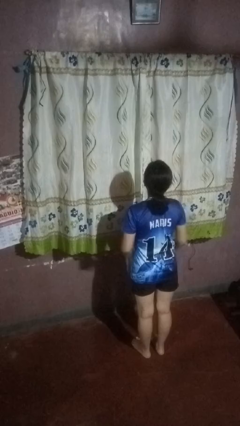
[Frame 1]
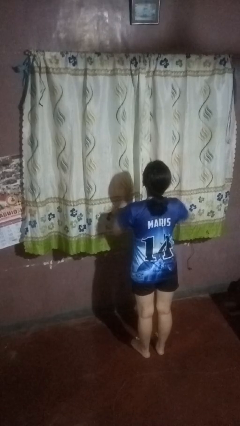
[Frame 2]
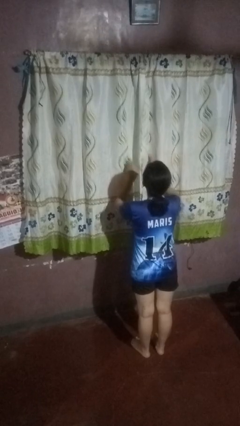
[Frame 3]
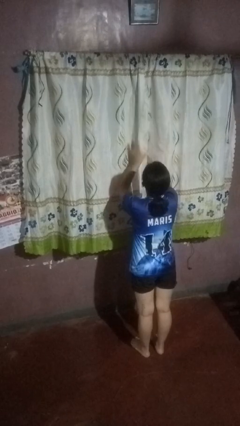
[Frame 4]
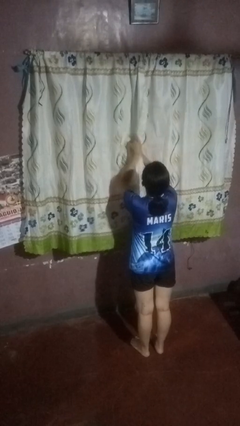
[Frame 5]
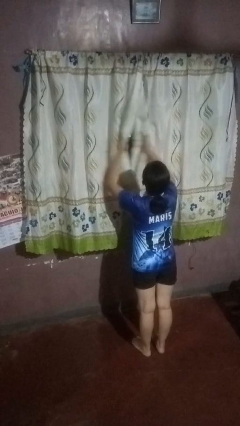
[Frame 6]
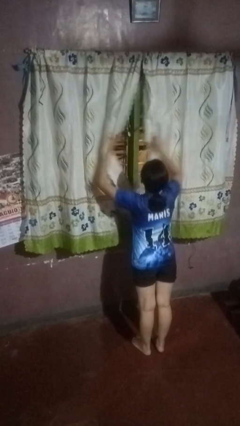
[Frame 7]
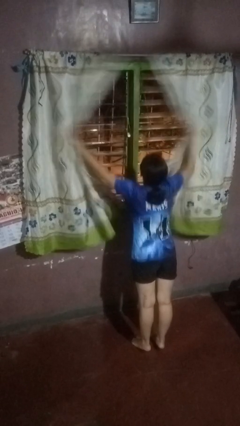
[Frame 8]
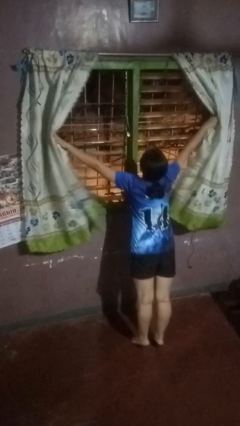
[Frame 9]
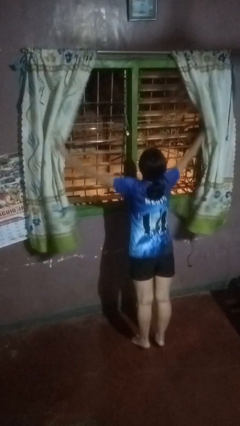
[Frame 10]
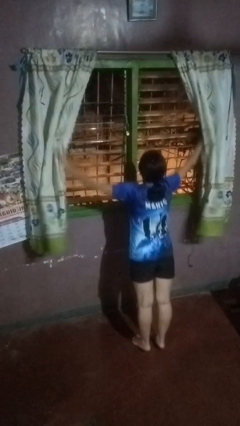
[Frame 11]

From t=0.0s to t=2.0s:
person opens curtains

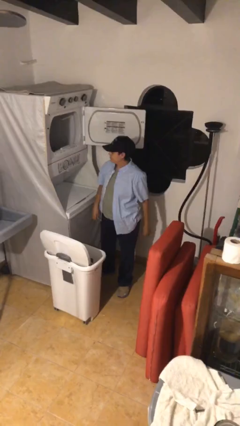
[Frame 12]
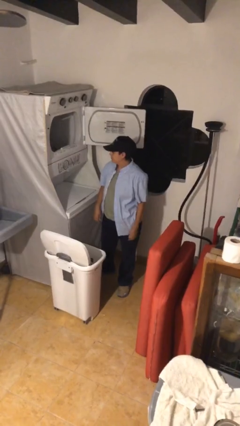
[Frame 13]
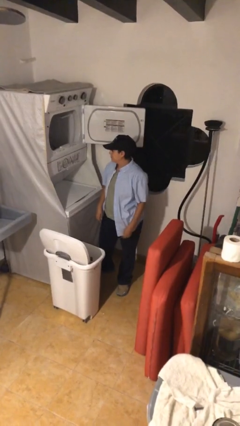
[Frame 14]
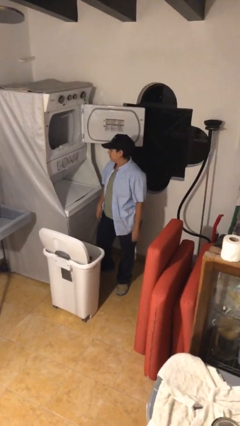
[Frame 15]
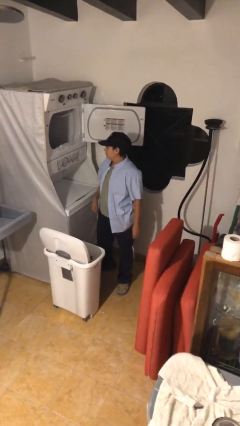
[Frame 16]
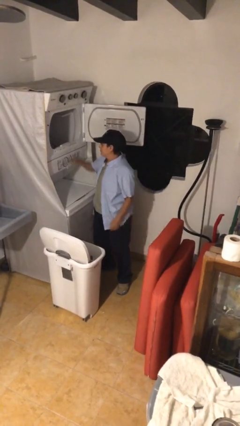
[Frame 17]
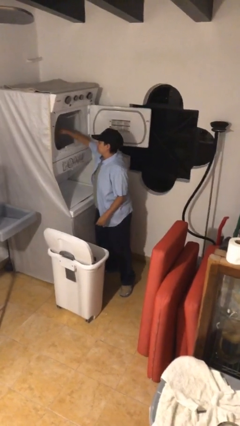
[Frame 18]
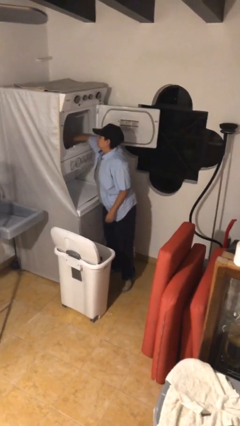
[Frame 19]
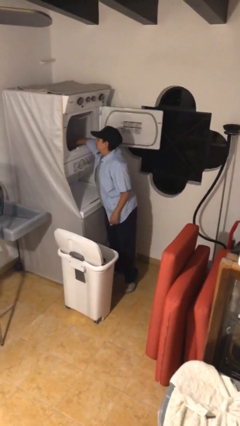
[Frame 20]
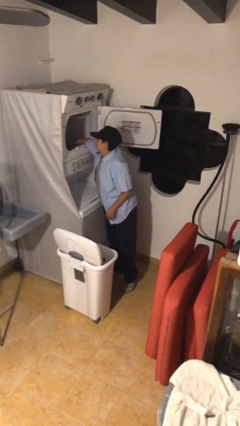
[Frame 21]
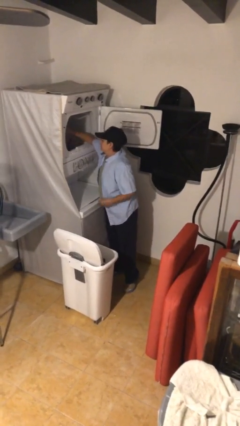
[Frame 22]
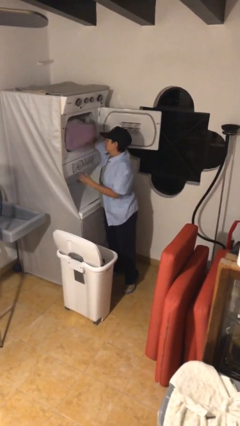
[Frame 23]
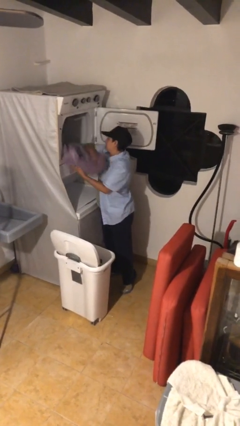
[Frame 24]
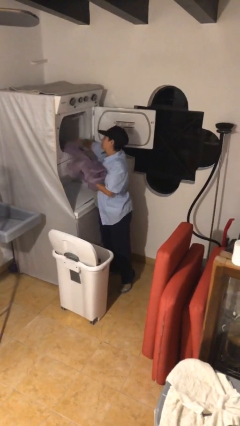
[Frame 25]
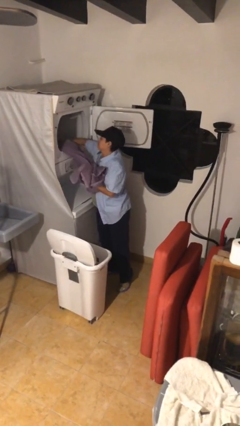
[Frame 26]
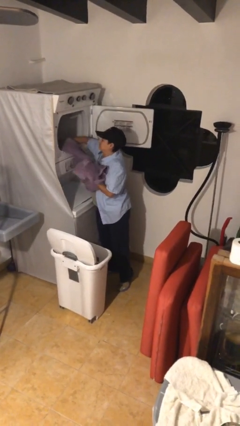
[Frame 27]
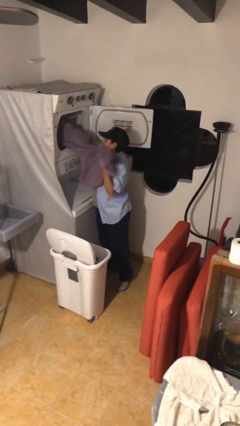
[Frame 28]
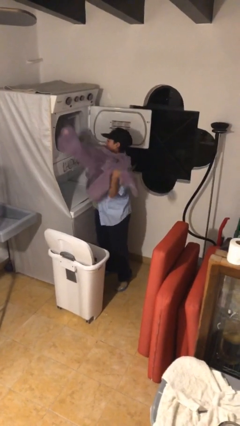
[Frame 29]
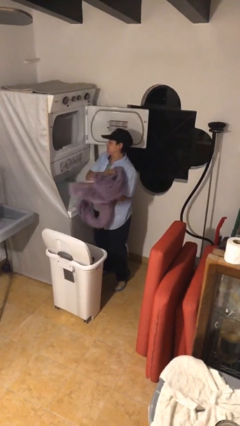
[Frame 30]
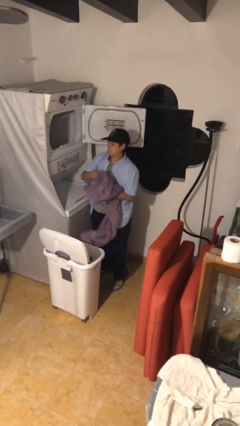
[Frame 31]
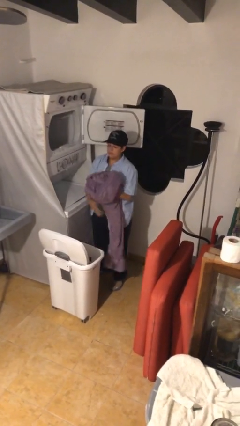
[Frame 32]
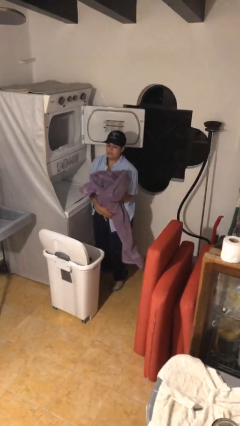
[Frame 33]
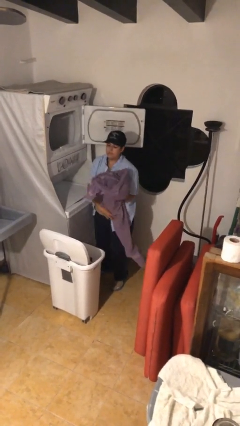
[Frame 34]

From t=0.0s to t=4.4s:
person unloads dryer

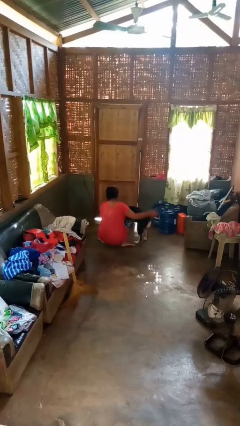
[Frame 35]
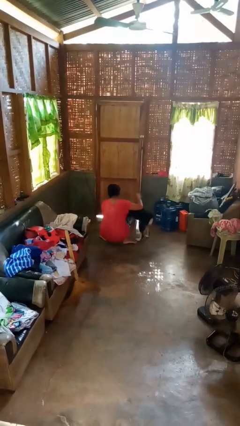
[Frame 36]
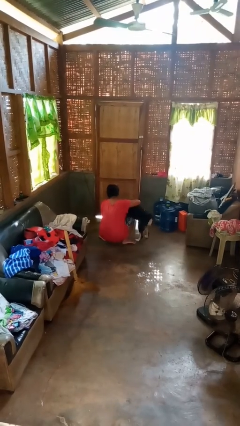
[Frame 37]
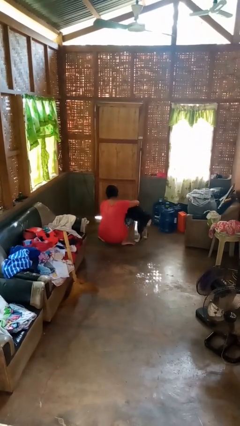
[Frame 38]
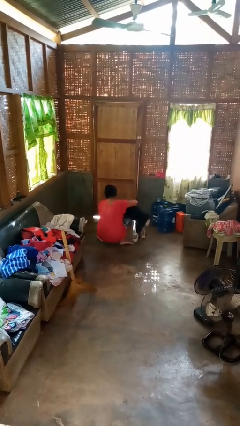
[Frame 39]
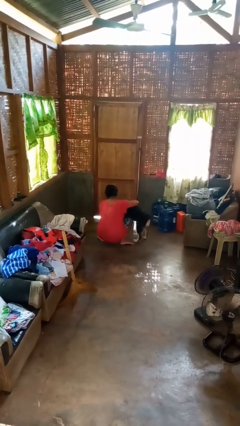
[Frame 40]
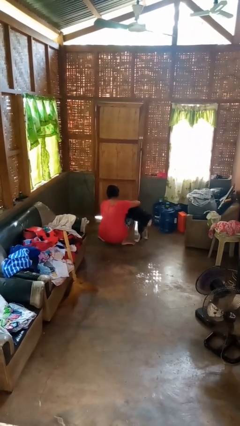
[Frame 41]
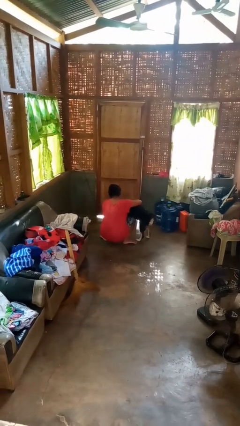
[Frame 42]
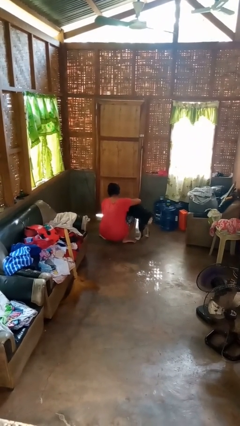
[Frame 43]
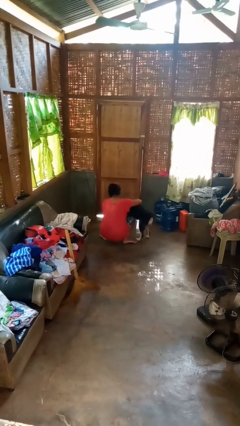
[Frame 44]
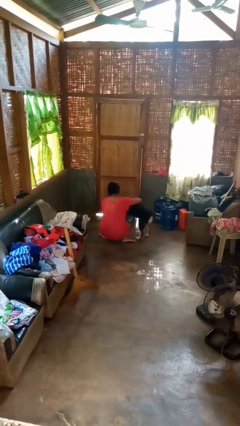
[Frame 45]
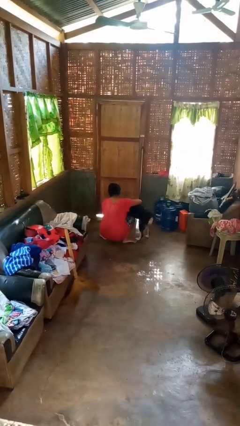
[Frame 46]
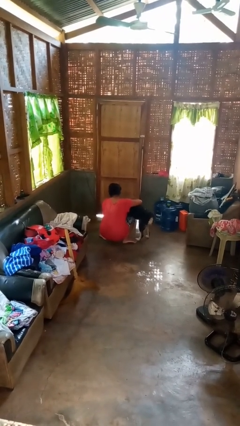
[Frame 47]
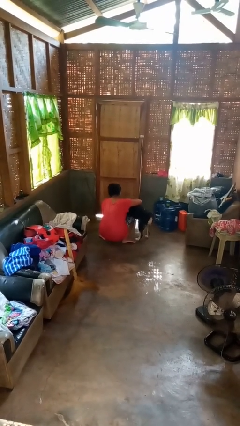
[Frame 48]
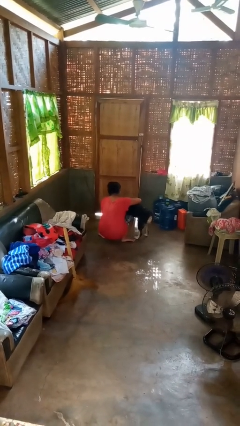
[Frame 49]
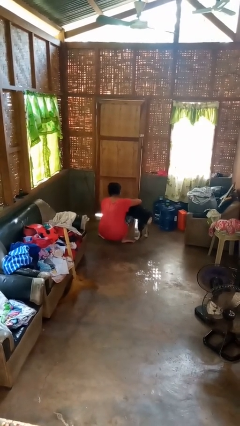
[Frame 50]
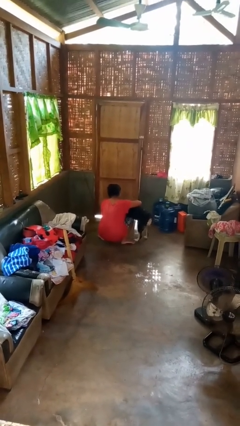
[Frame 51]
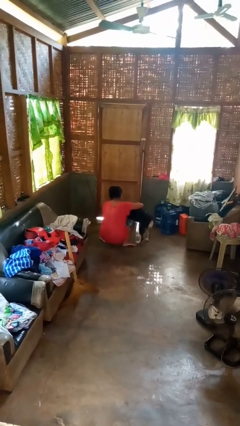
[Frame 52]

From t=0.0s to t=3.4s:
person hugs dog

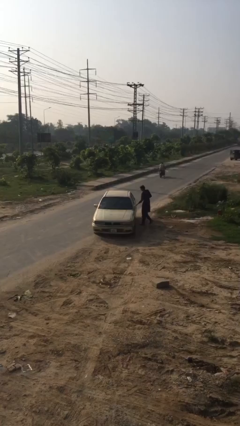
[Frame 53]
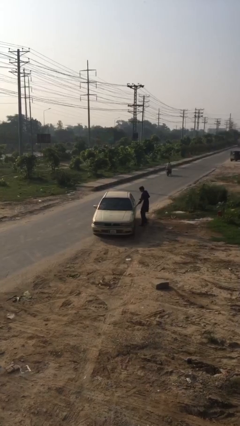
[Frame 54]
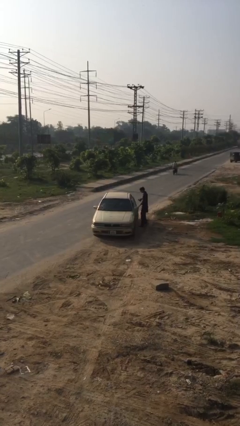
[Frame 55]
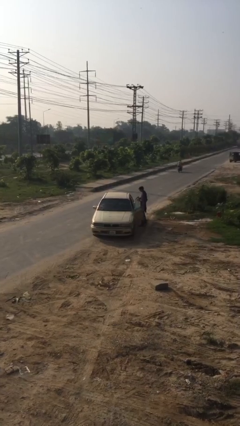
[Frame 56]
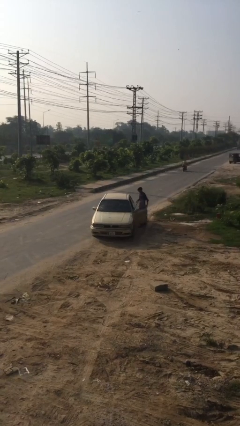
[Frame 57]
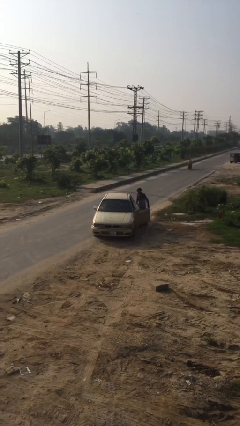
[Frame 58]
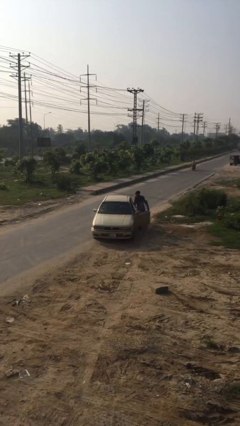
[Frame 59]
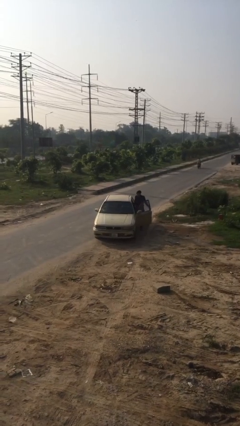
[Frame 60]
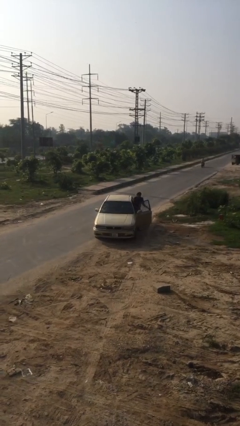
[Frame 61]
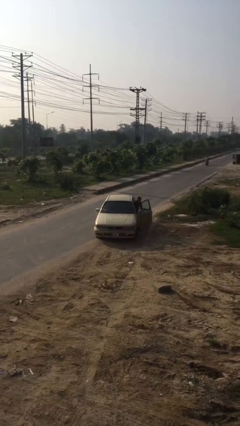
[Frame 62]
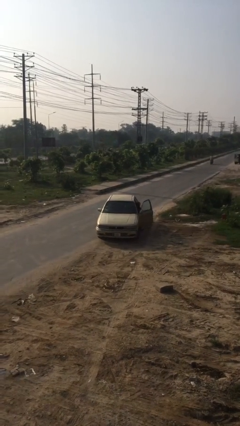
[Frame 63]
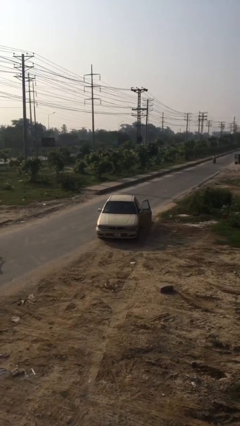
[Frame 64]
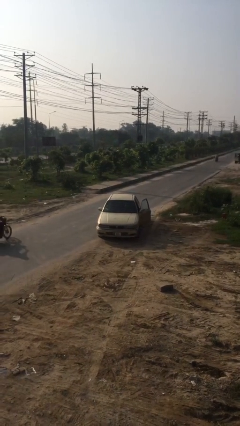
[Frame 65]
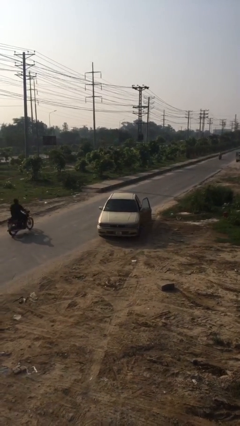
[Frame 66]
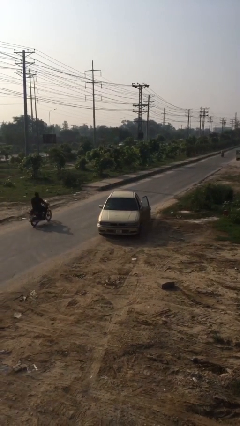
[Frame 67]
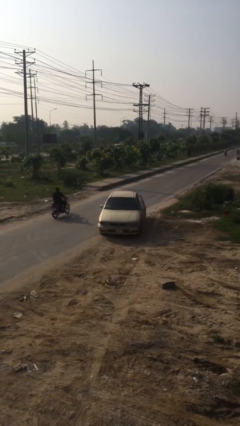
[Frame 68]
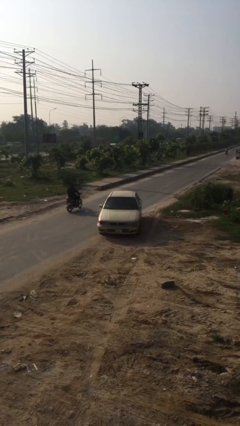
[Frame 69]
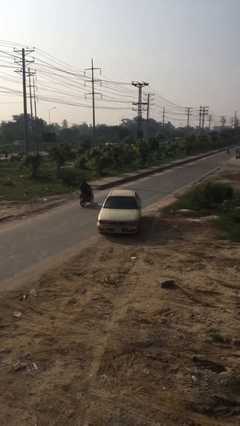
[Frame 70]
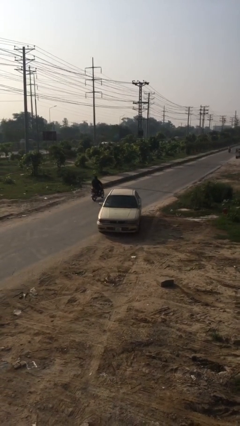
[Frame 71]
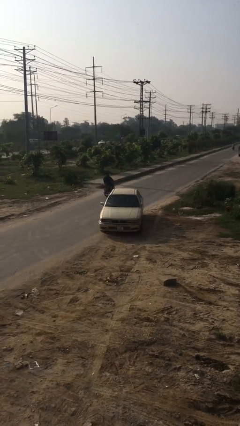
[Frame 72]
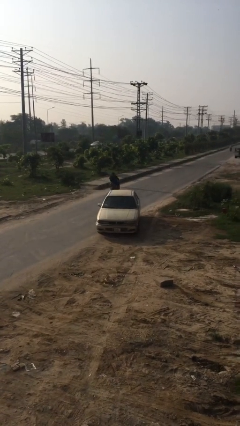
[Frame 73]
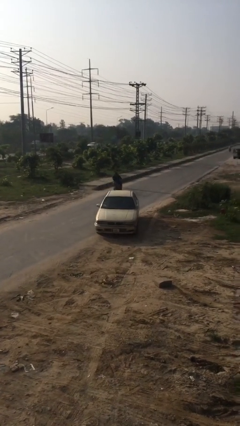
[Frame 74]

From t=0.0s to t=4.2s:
car picks up person

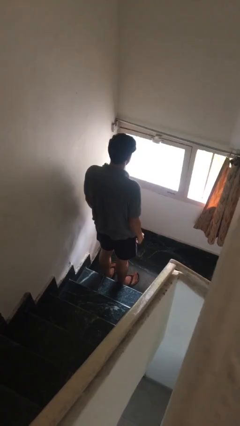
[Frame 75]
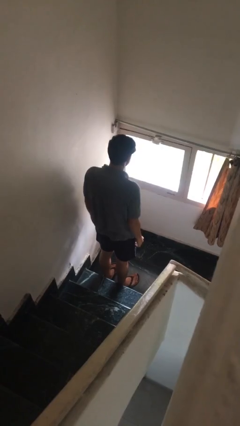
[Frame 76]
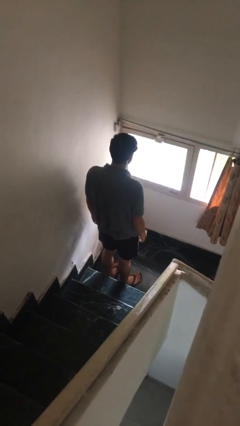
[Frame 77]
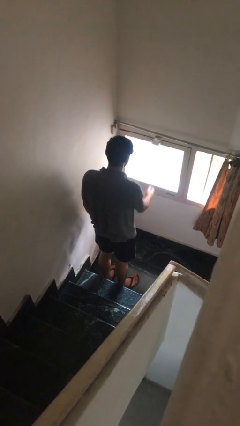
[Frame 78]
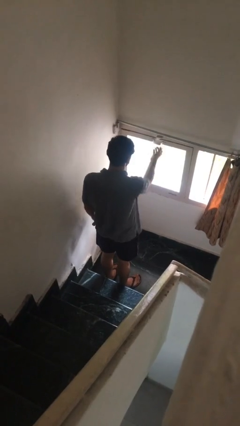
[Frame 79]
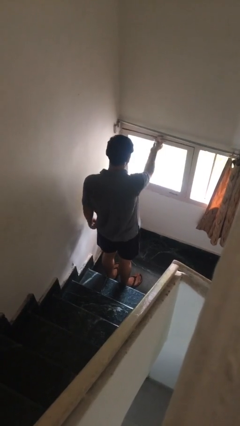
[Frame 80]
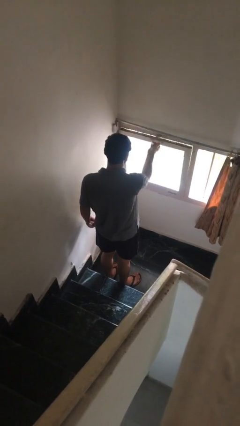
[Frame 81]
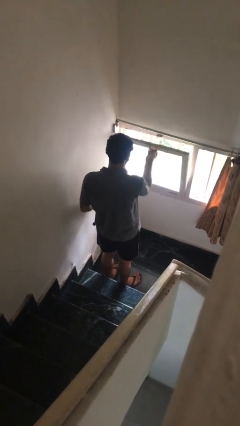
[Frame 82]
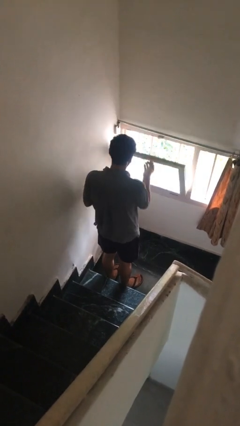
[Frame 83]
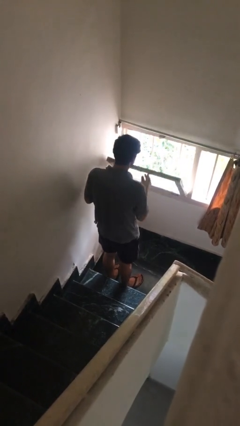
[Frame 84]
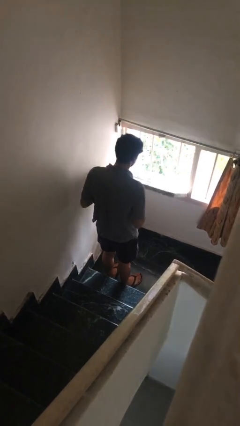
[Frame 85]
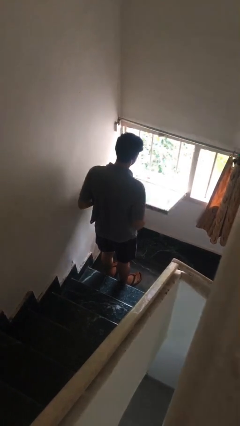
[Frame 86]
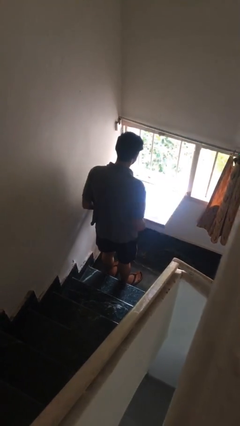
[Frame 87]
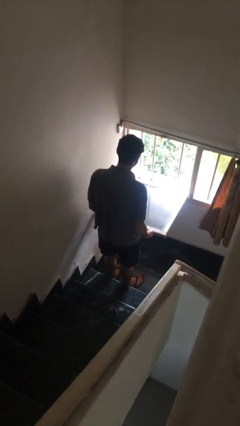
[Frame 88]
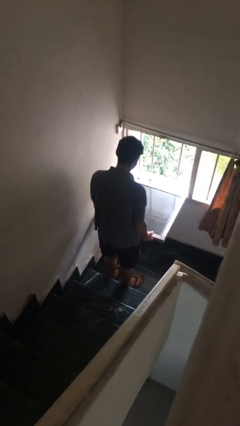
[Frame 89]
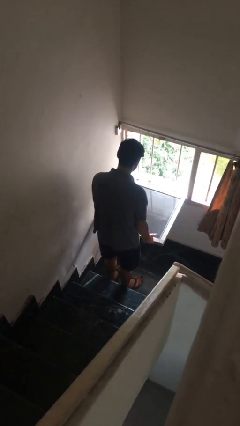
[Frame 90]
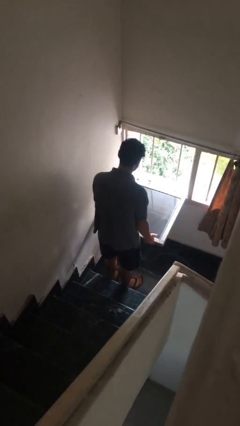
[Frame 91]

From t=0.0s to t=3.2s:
person opens home window

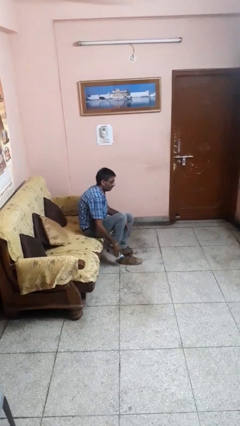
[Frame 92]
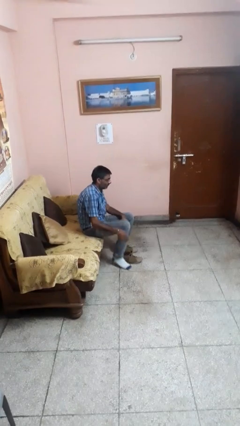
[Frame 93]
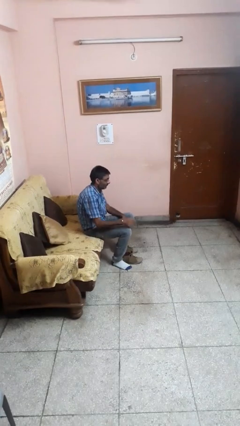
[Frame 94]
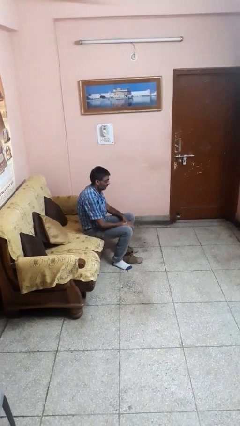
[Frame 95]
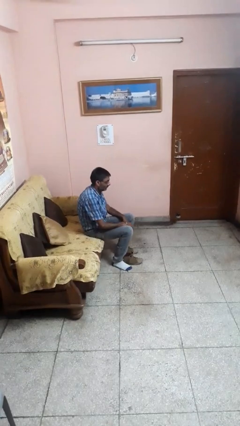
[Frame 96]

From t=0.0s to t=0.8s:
person takes off shoes
